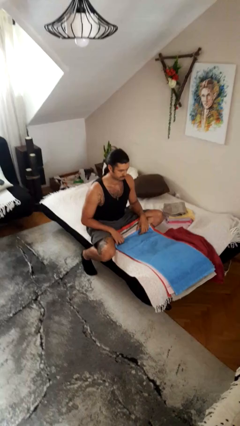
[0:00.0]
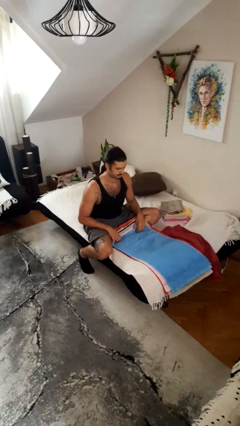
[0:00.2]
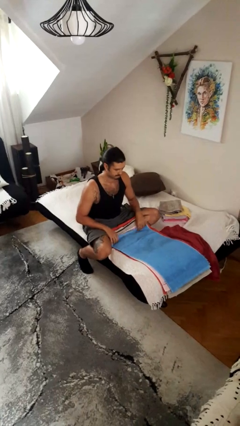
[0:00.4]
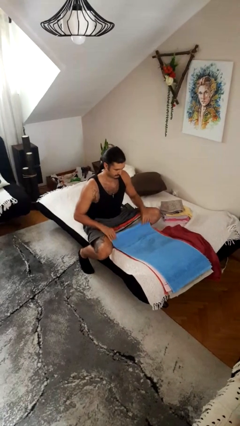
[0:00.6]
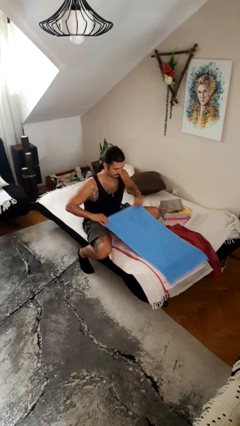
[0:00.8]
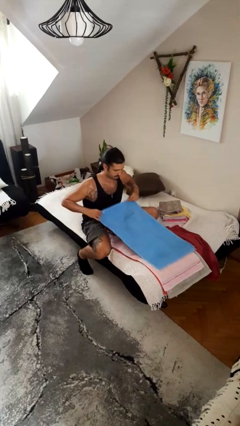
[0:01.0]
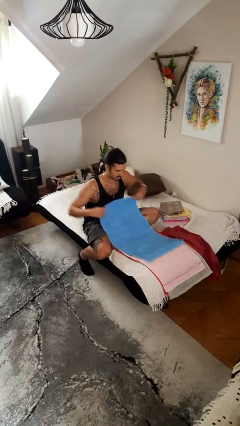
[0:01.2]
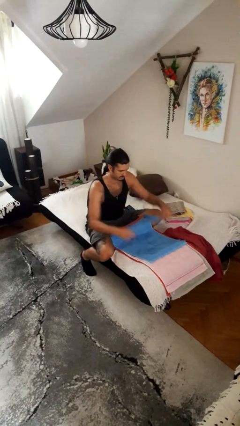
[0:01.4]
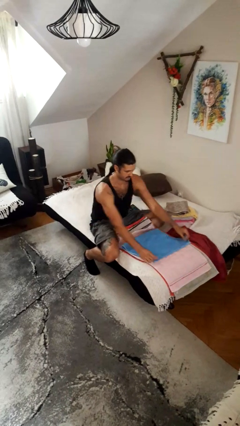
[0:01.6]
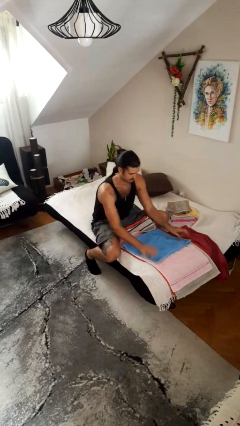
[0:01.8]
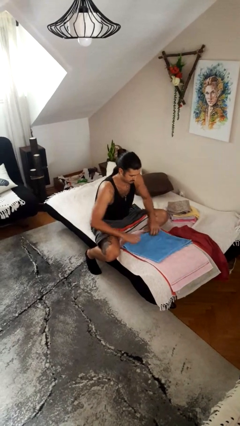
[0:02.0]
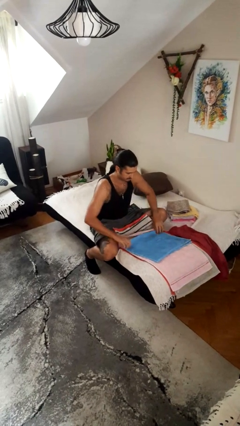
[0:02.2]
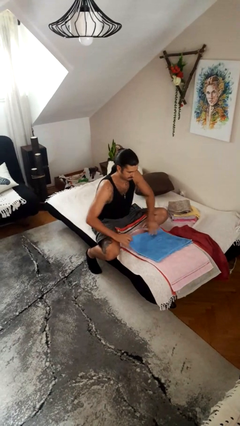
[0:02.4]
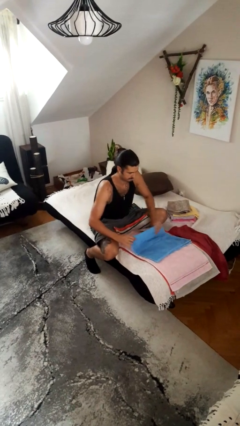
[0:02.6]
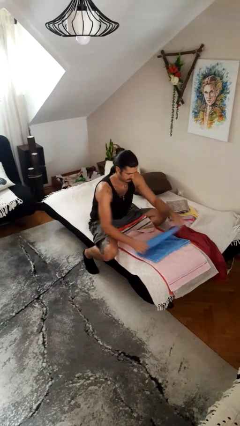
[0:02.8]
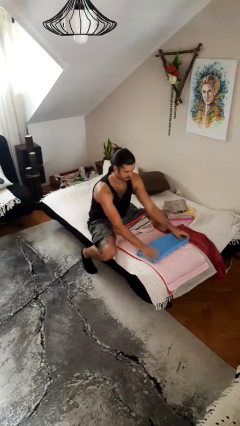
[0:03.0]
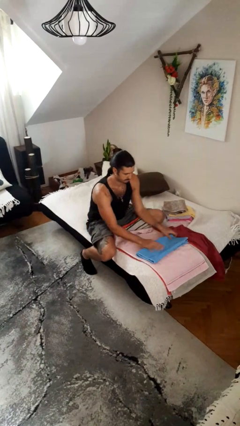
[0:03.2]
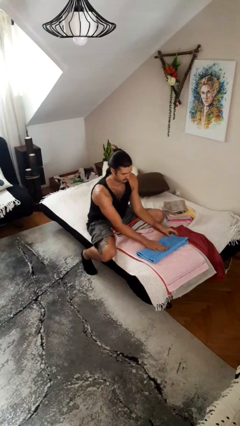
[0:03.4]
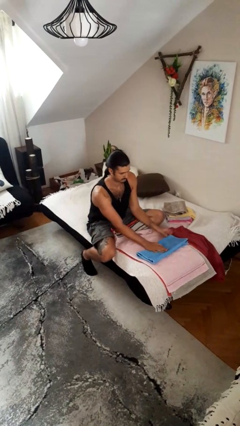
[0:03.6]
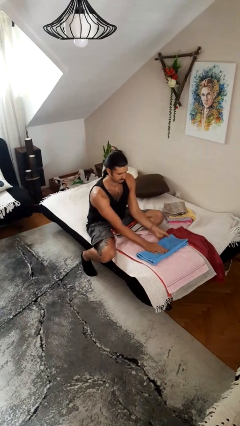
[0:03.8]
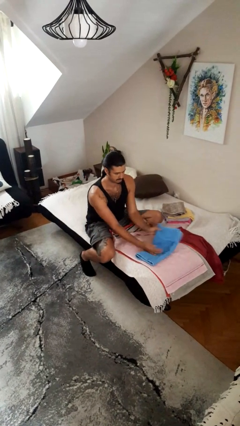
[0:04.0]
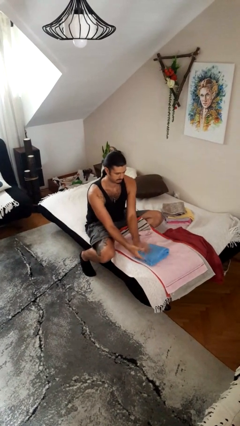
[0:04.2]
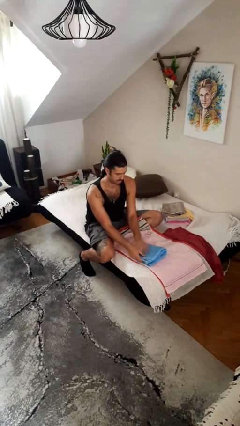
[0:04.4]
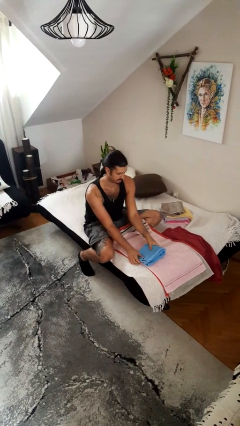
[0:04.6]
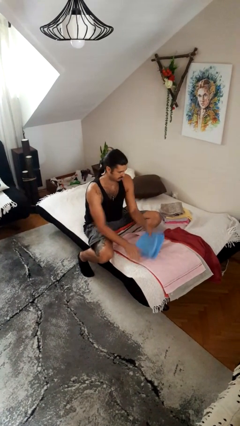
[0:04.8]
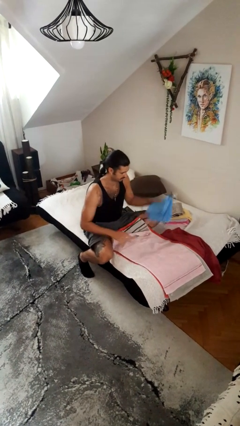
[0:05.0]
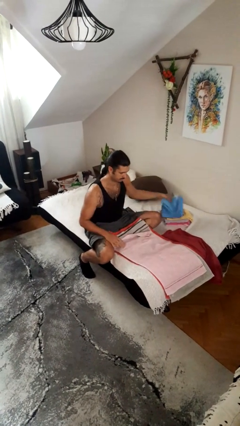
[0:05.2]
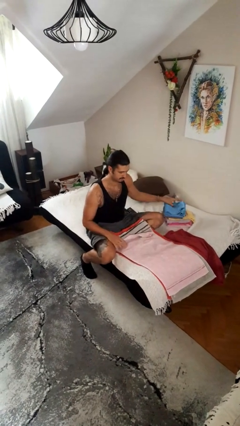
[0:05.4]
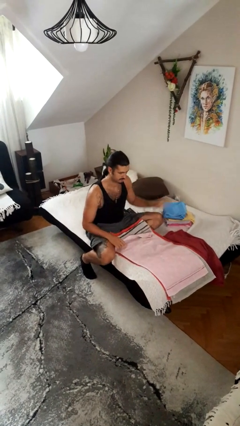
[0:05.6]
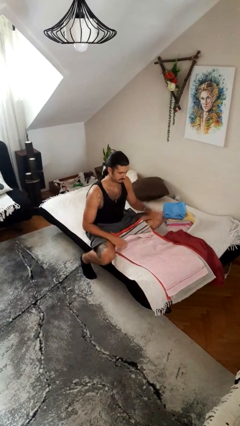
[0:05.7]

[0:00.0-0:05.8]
person folds towel

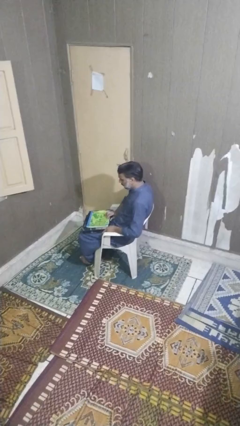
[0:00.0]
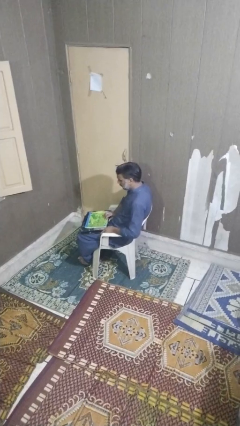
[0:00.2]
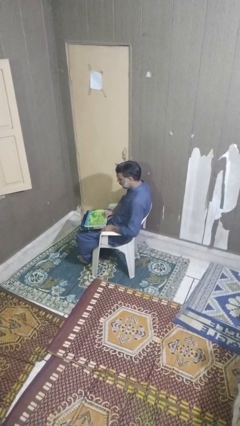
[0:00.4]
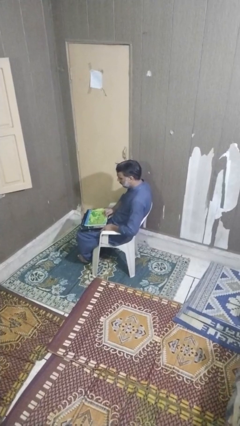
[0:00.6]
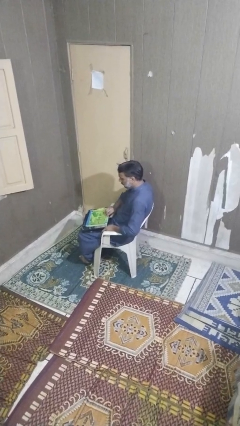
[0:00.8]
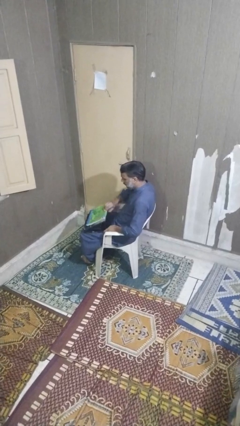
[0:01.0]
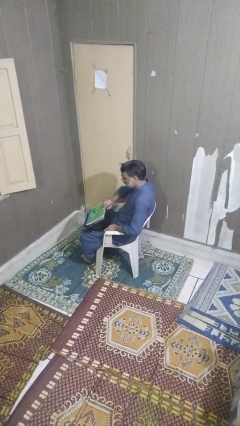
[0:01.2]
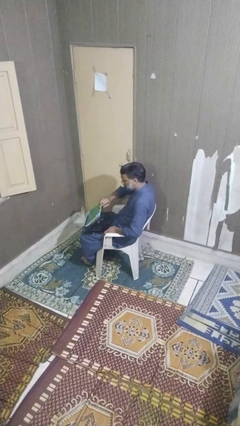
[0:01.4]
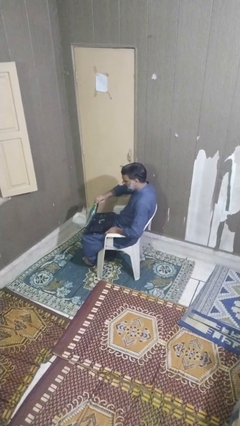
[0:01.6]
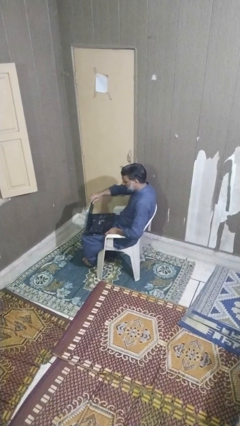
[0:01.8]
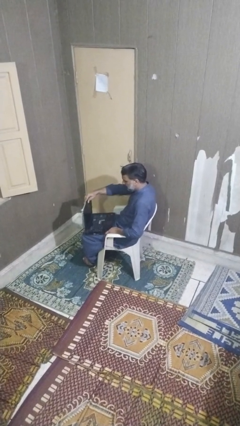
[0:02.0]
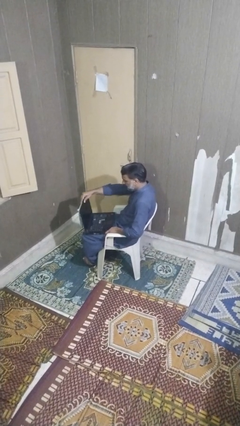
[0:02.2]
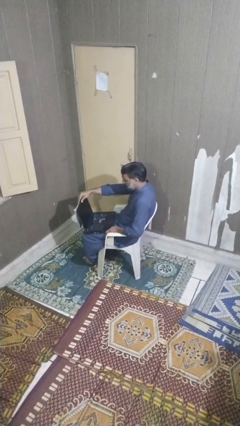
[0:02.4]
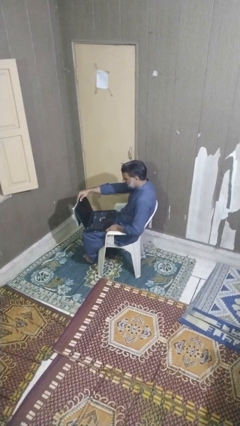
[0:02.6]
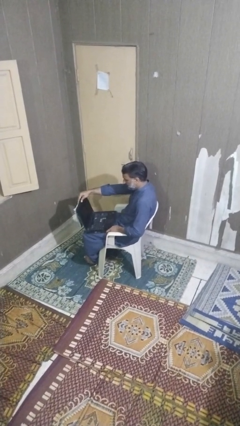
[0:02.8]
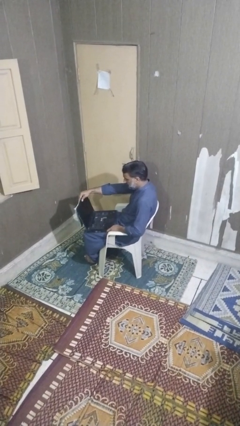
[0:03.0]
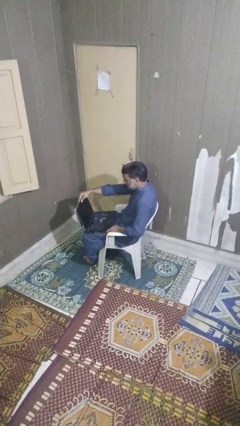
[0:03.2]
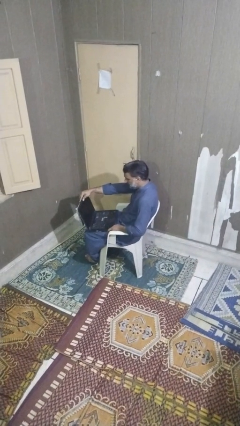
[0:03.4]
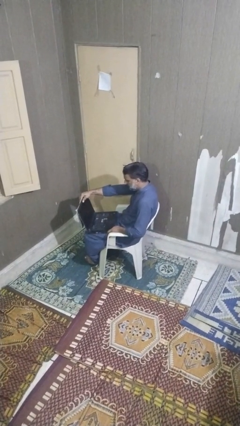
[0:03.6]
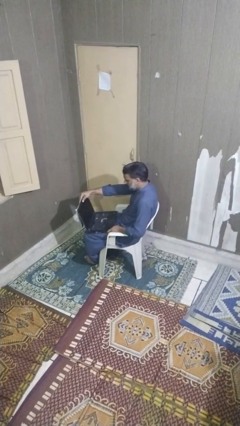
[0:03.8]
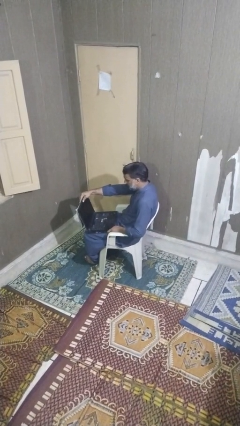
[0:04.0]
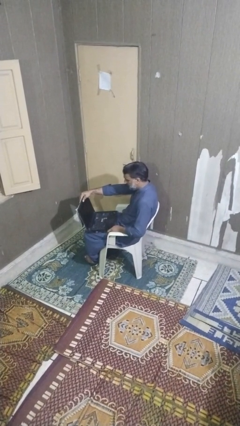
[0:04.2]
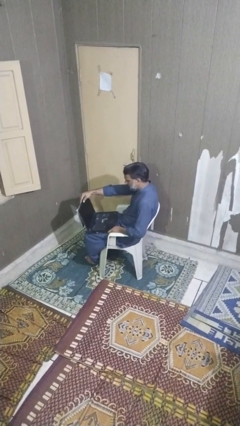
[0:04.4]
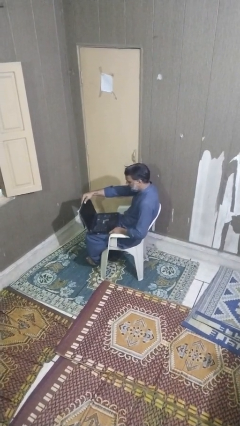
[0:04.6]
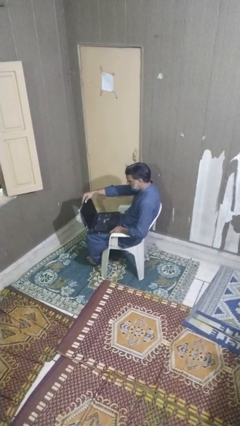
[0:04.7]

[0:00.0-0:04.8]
person opens laptop

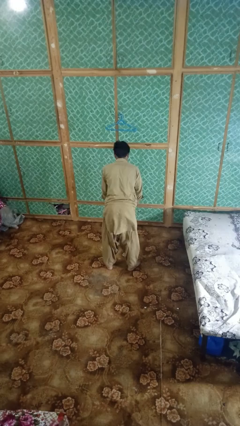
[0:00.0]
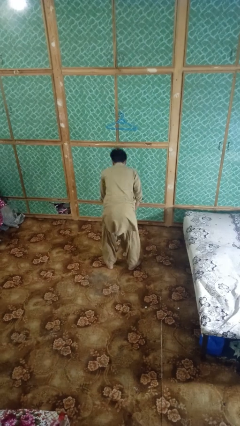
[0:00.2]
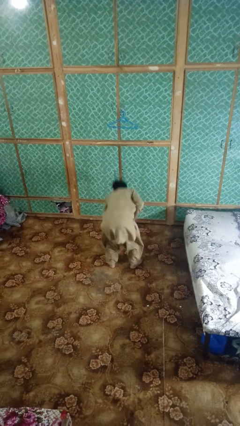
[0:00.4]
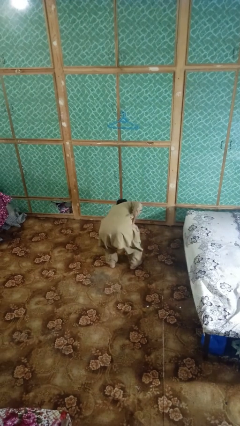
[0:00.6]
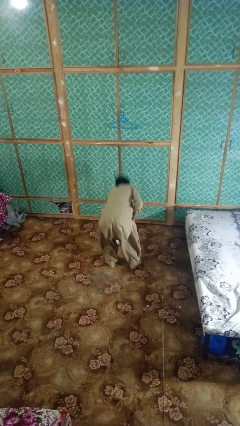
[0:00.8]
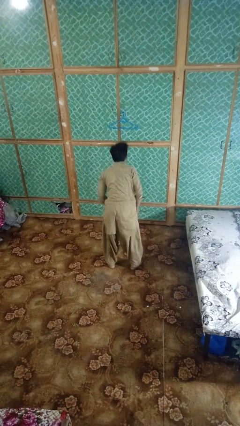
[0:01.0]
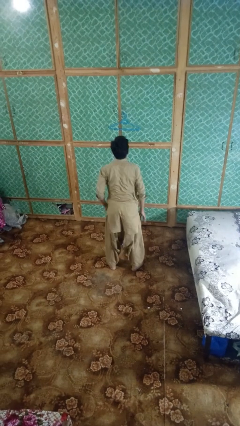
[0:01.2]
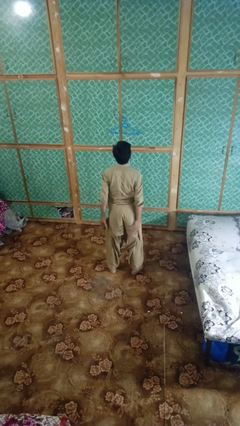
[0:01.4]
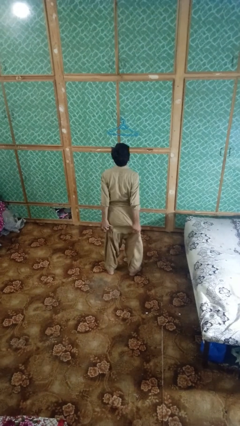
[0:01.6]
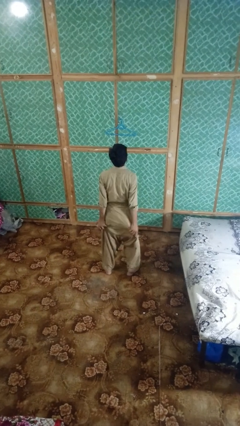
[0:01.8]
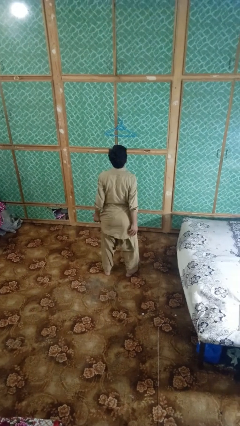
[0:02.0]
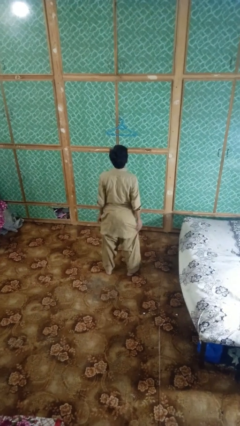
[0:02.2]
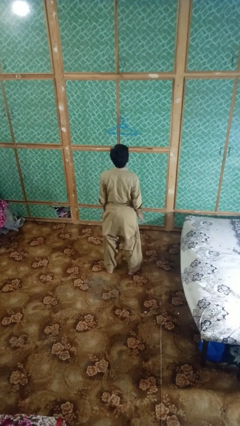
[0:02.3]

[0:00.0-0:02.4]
person picks up object from floor

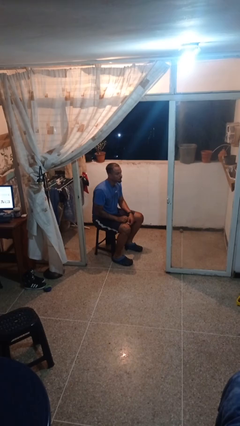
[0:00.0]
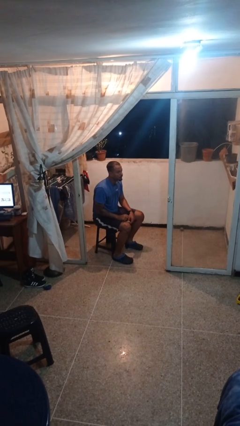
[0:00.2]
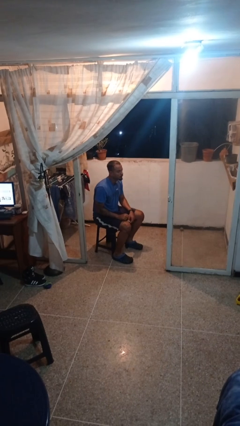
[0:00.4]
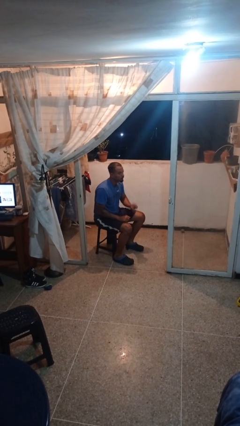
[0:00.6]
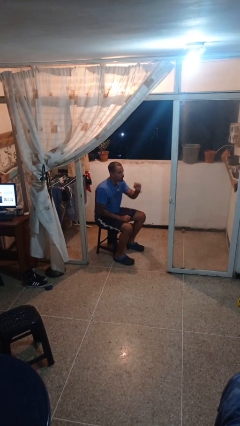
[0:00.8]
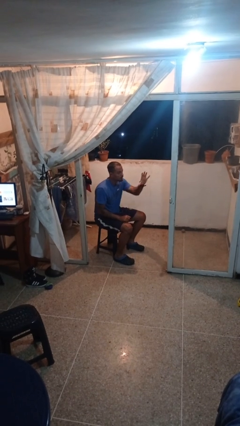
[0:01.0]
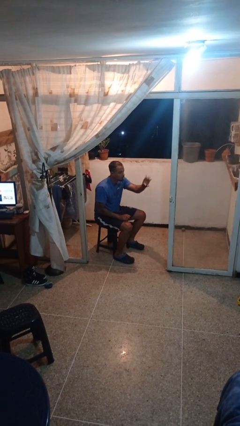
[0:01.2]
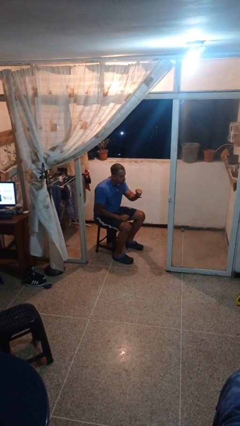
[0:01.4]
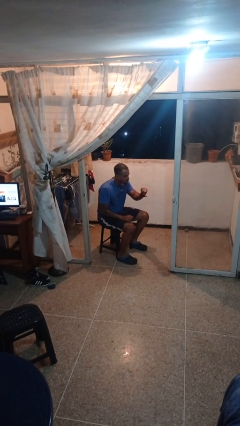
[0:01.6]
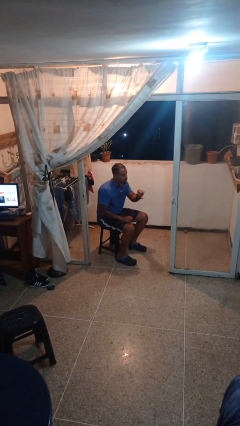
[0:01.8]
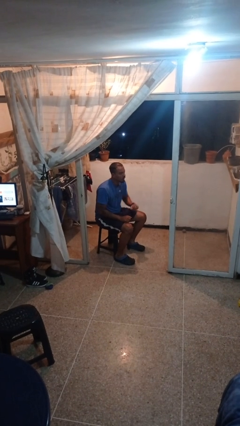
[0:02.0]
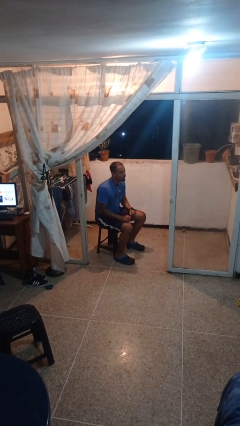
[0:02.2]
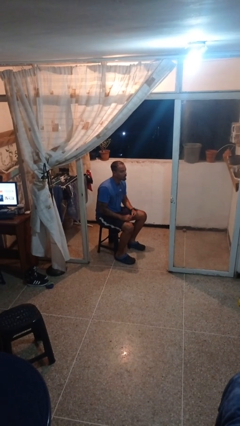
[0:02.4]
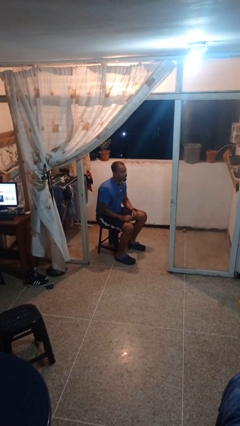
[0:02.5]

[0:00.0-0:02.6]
person gestures zoom out

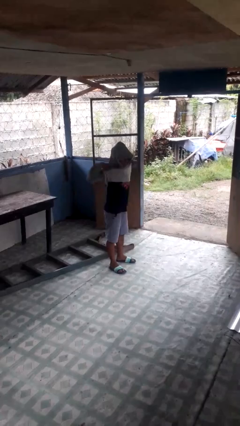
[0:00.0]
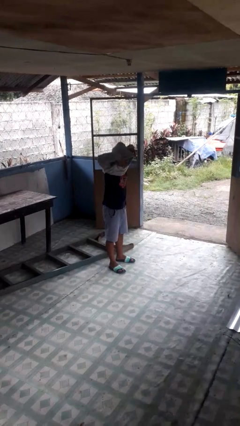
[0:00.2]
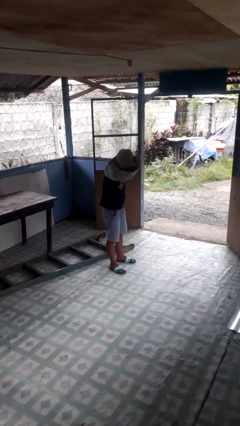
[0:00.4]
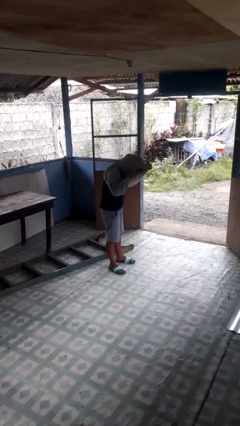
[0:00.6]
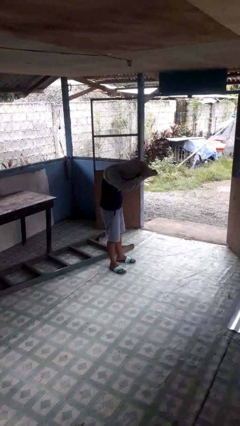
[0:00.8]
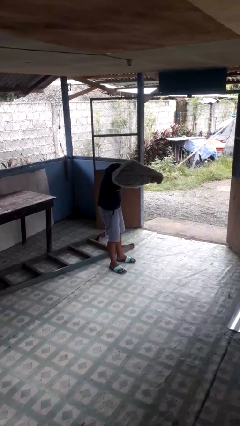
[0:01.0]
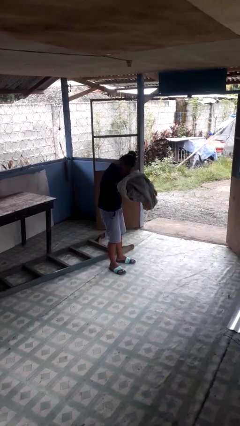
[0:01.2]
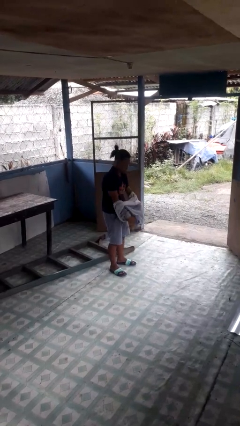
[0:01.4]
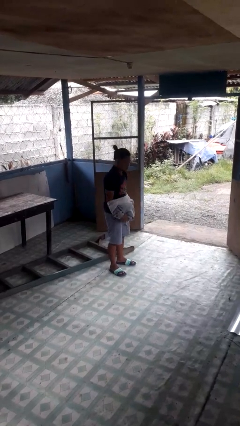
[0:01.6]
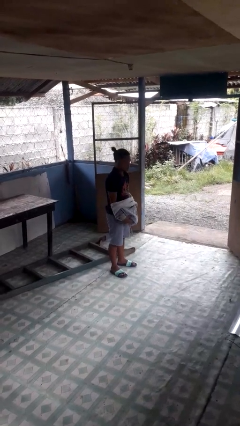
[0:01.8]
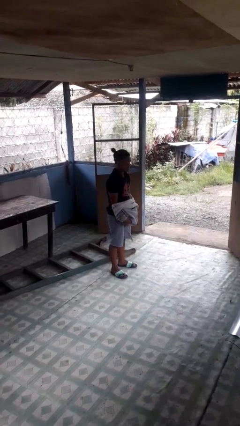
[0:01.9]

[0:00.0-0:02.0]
person takes off hoodie
